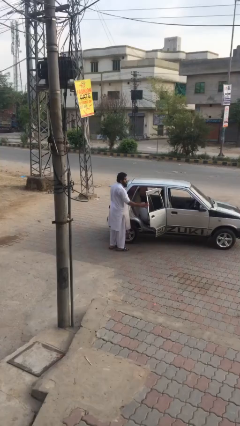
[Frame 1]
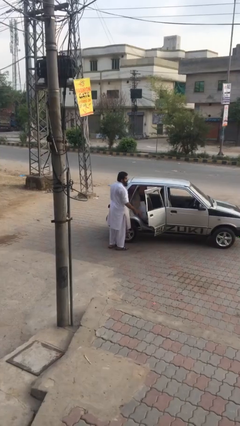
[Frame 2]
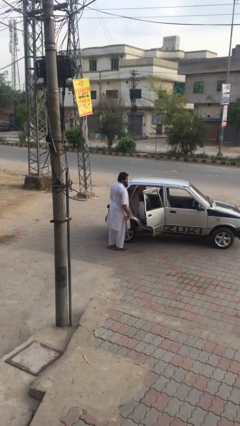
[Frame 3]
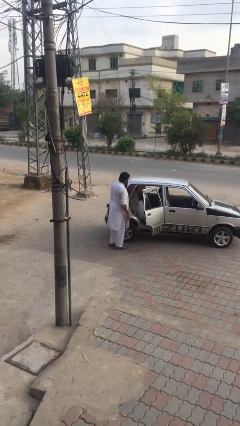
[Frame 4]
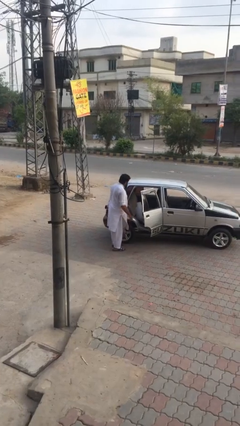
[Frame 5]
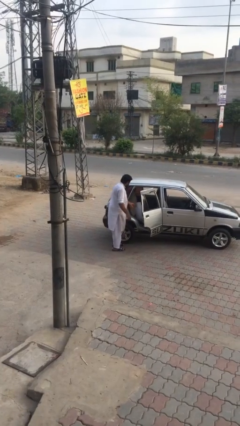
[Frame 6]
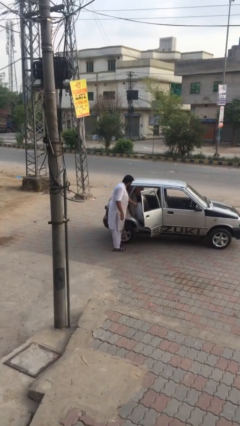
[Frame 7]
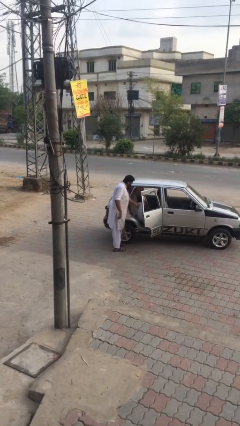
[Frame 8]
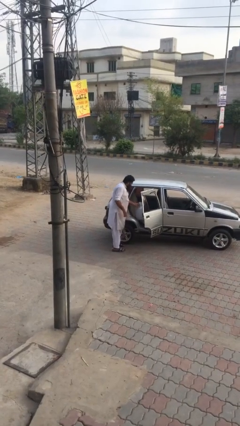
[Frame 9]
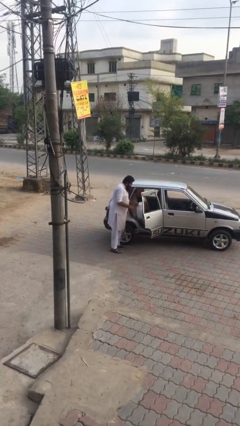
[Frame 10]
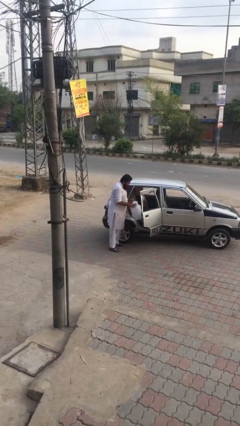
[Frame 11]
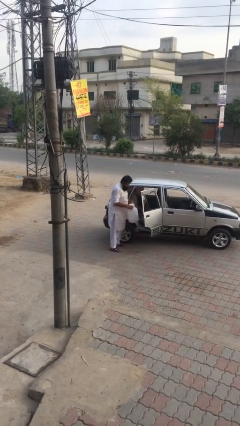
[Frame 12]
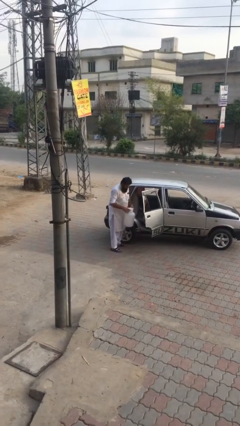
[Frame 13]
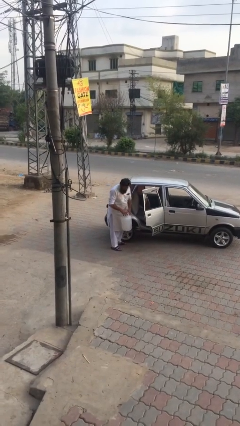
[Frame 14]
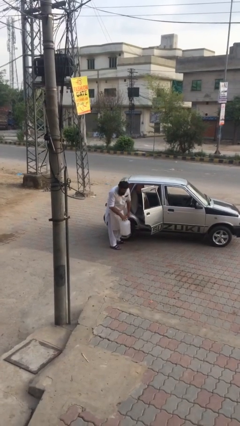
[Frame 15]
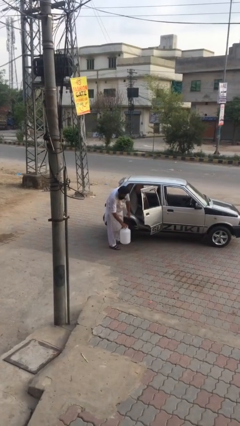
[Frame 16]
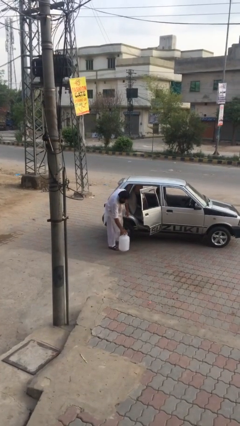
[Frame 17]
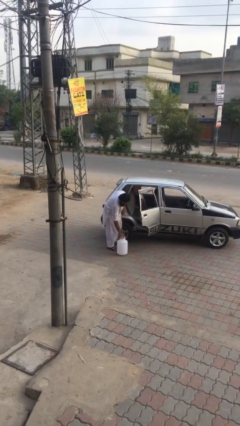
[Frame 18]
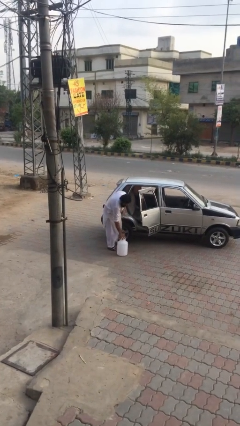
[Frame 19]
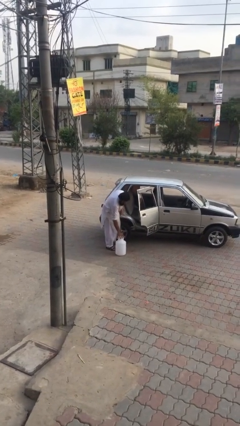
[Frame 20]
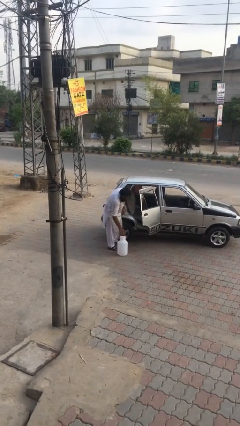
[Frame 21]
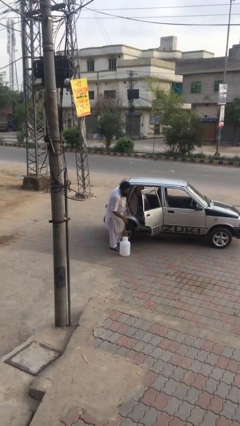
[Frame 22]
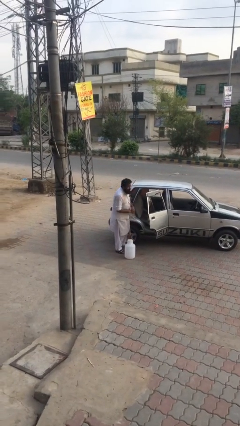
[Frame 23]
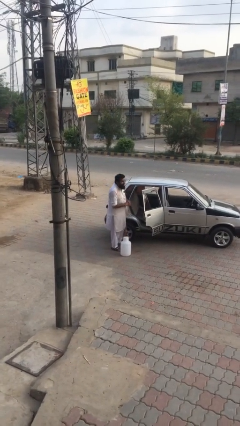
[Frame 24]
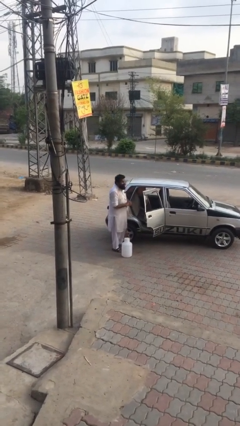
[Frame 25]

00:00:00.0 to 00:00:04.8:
person unloads car

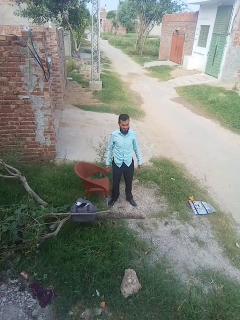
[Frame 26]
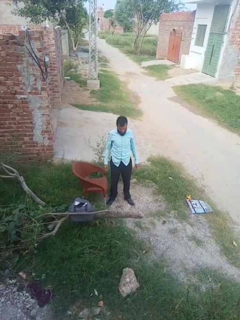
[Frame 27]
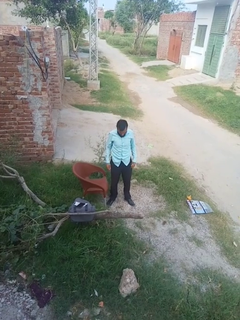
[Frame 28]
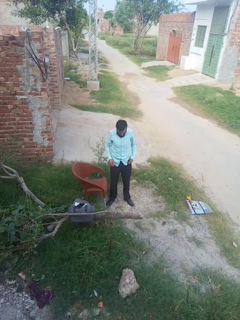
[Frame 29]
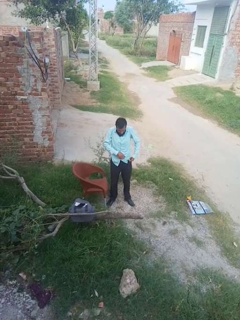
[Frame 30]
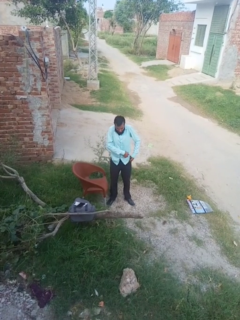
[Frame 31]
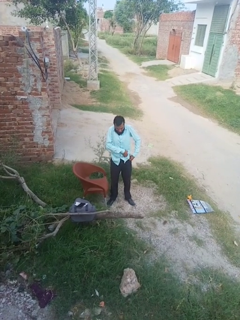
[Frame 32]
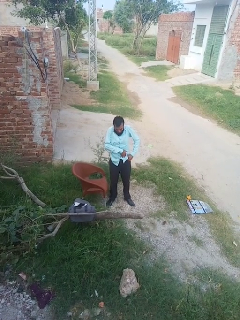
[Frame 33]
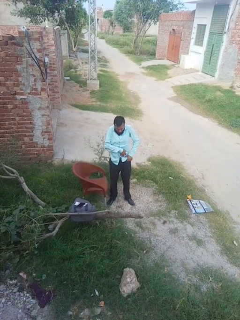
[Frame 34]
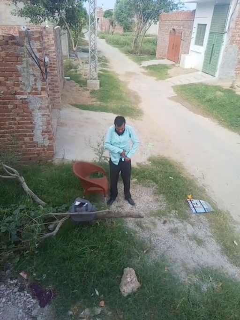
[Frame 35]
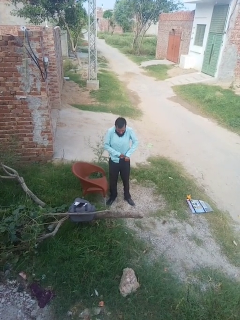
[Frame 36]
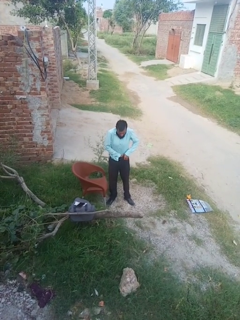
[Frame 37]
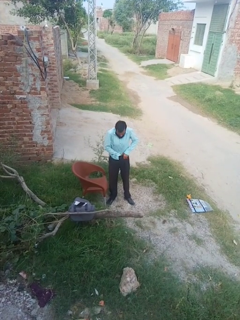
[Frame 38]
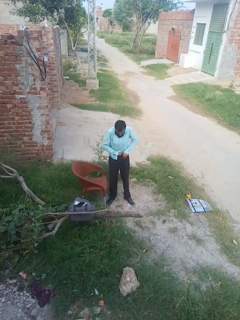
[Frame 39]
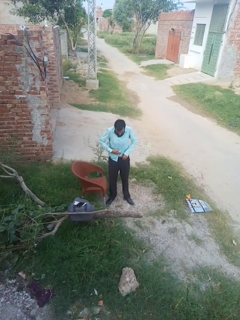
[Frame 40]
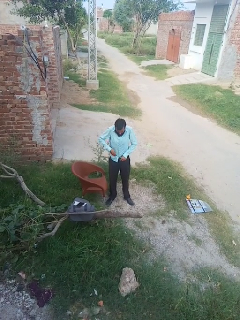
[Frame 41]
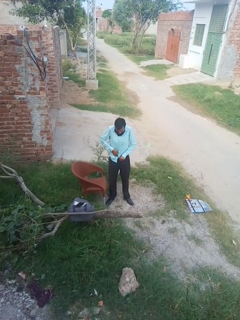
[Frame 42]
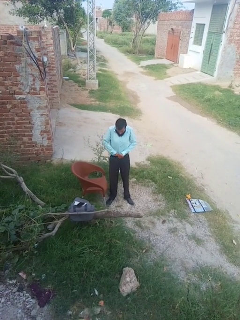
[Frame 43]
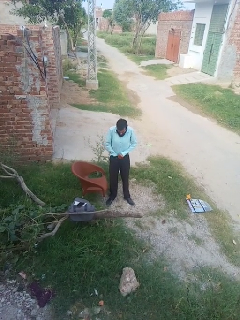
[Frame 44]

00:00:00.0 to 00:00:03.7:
person tucks in shirt

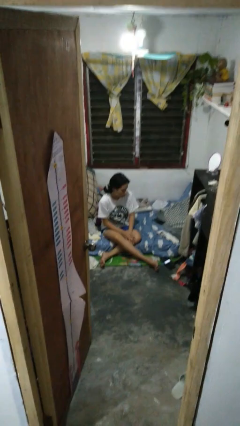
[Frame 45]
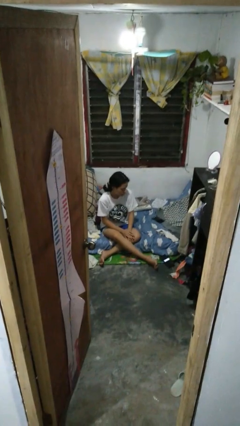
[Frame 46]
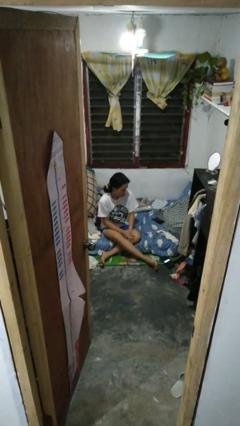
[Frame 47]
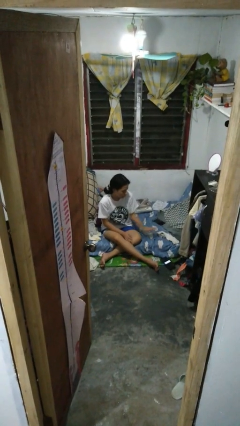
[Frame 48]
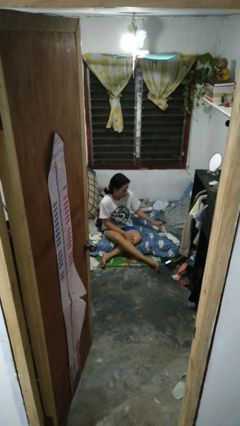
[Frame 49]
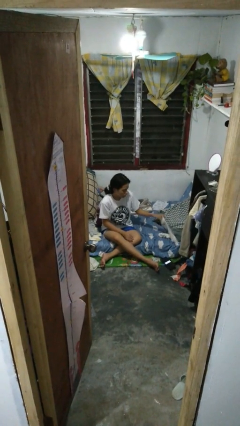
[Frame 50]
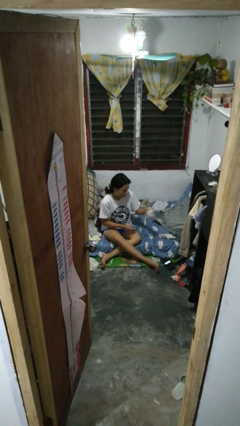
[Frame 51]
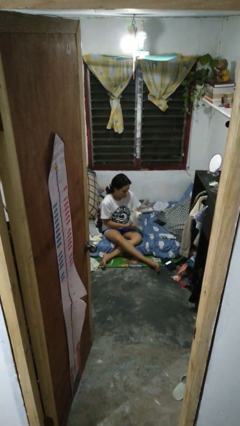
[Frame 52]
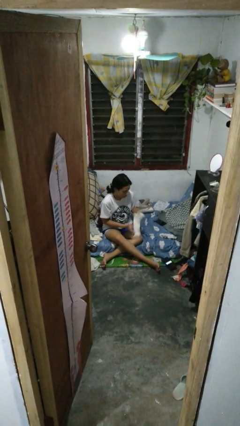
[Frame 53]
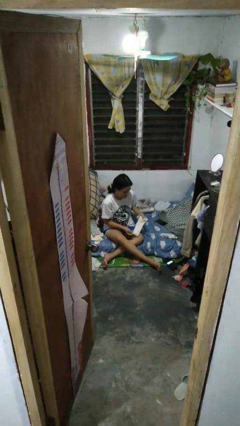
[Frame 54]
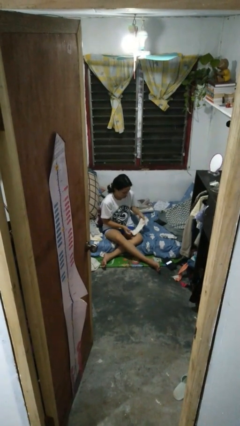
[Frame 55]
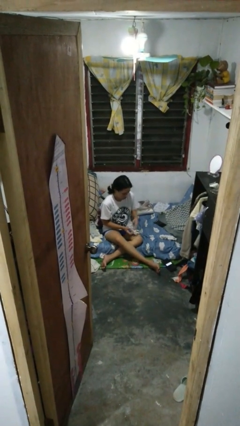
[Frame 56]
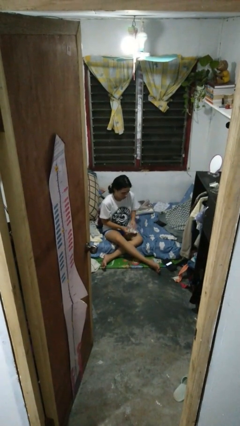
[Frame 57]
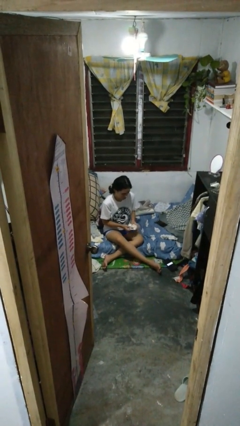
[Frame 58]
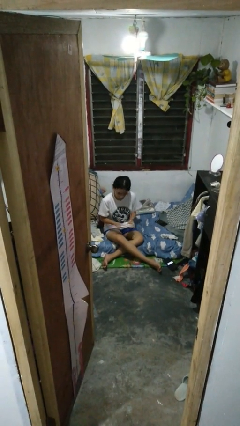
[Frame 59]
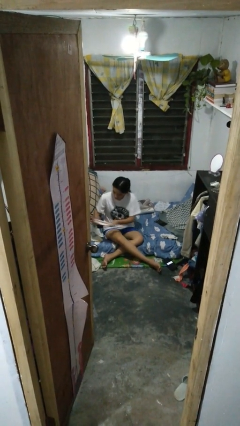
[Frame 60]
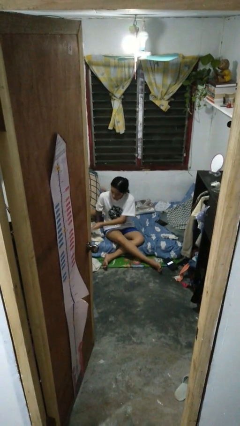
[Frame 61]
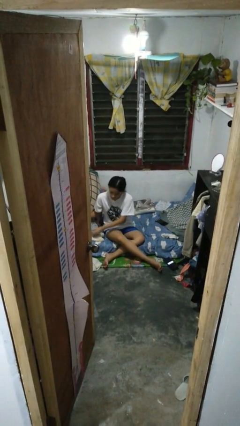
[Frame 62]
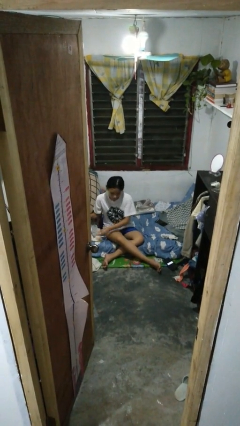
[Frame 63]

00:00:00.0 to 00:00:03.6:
person folds socks

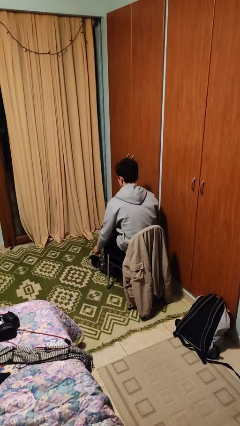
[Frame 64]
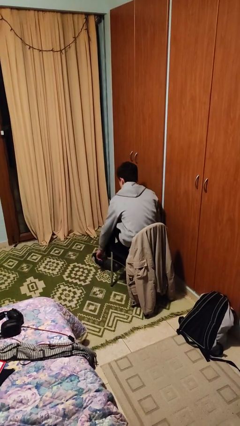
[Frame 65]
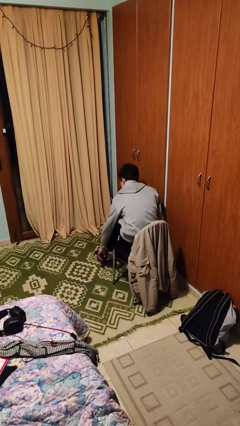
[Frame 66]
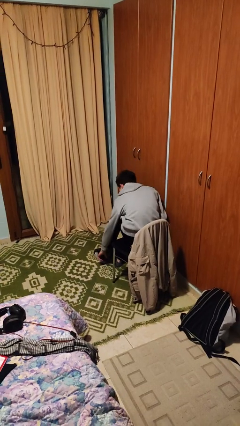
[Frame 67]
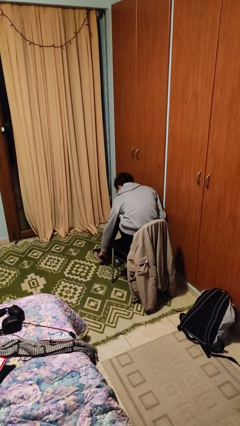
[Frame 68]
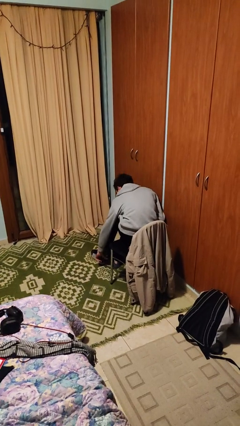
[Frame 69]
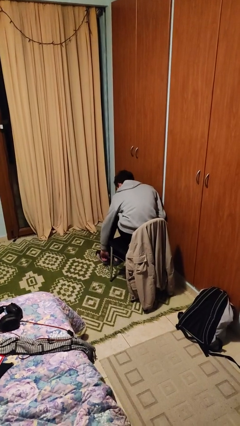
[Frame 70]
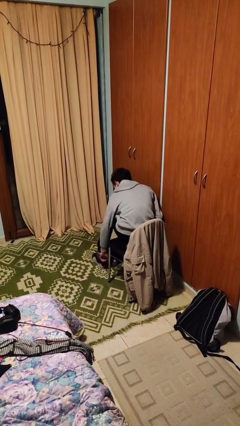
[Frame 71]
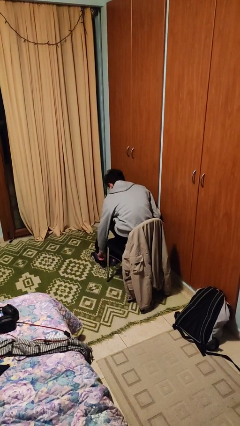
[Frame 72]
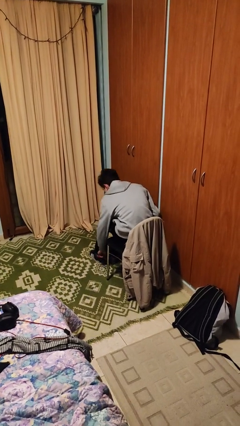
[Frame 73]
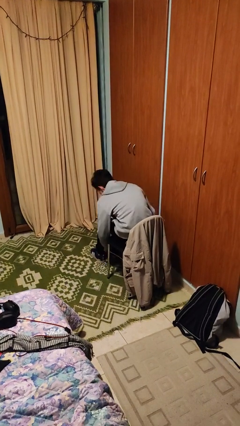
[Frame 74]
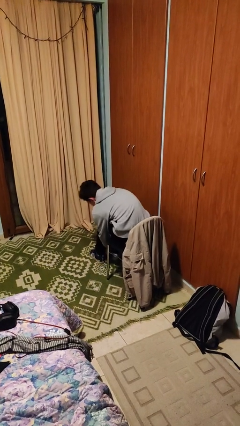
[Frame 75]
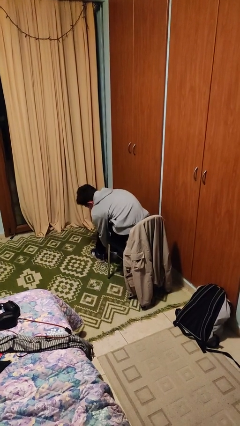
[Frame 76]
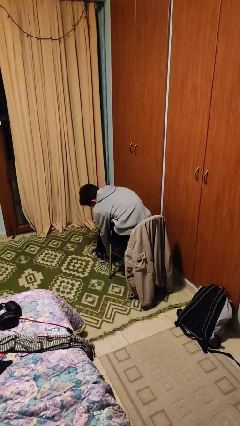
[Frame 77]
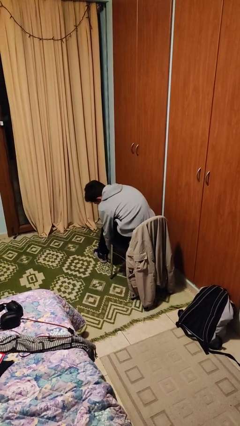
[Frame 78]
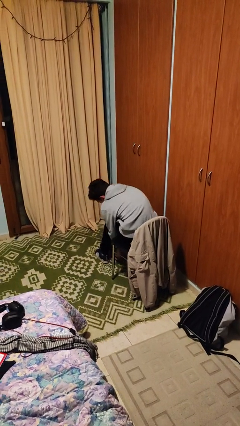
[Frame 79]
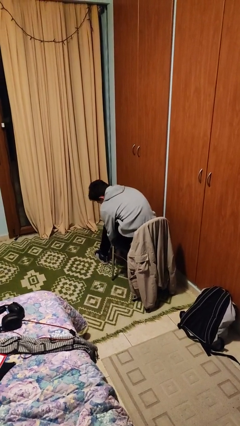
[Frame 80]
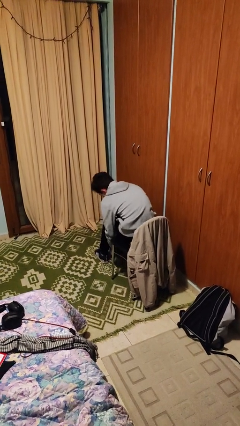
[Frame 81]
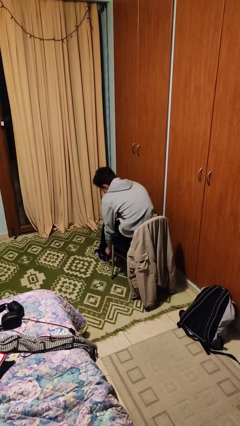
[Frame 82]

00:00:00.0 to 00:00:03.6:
person puts on shoes

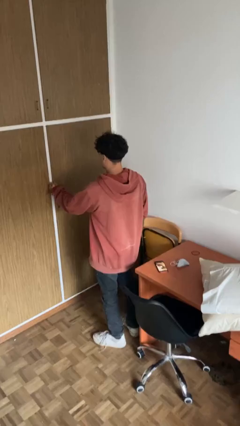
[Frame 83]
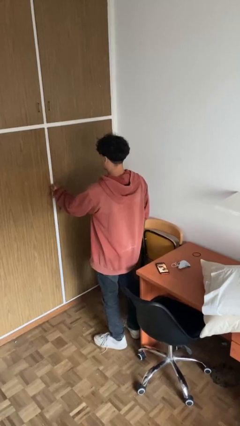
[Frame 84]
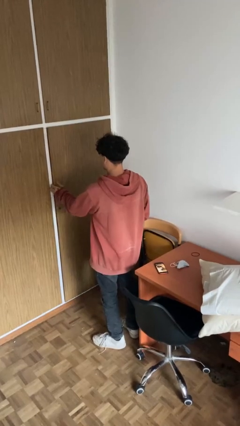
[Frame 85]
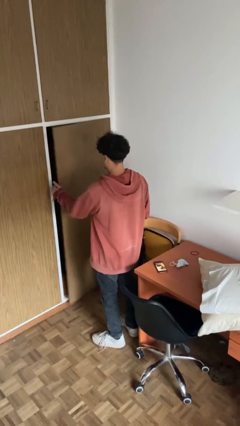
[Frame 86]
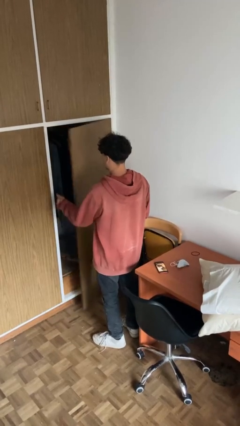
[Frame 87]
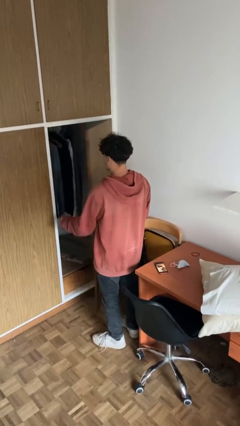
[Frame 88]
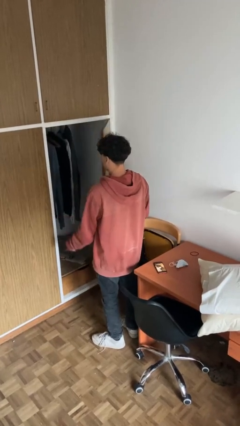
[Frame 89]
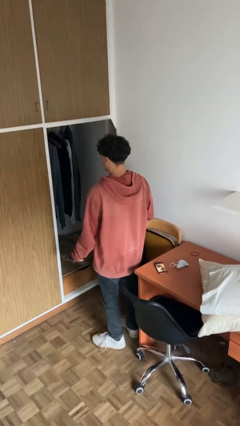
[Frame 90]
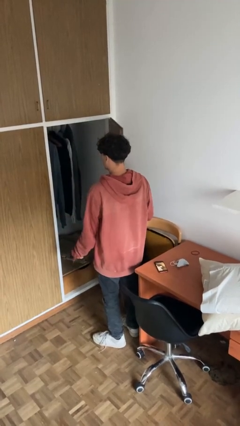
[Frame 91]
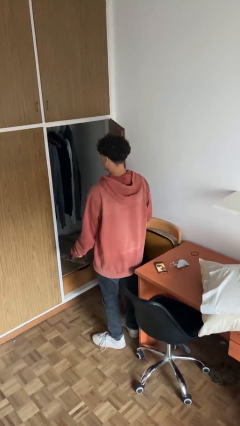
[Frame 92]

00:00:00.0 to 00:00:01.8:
person opens closet door

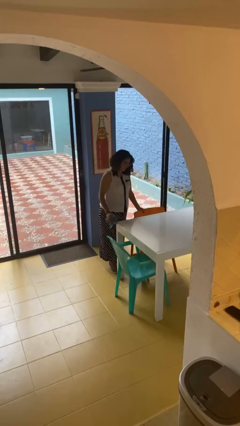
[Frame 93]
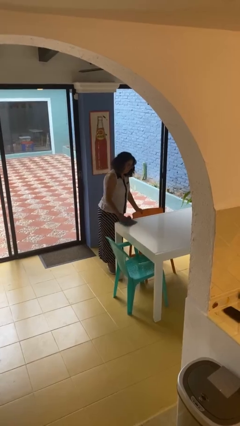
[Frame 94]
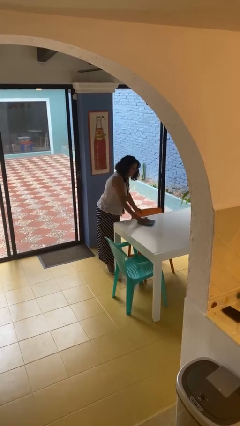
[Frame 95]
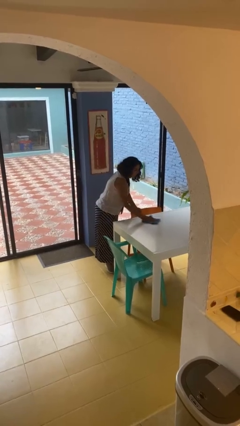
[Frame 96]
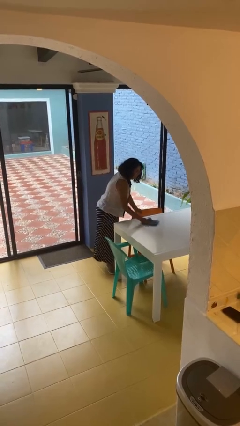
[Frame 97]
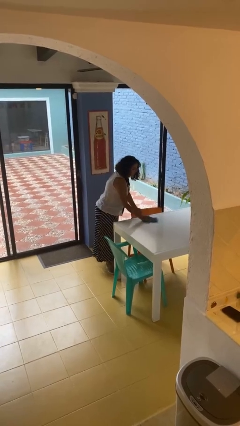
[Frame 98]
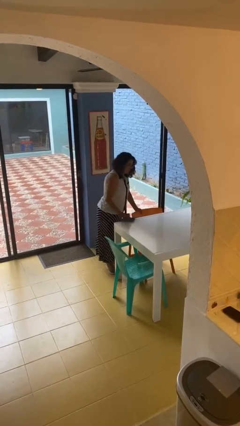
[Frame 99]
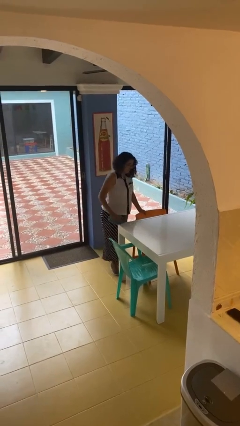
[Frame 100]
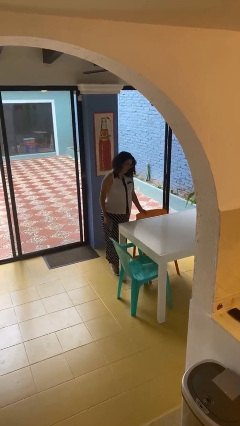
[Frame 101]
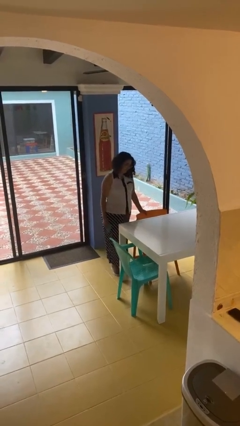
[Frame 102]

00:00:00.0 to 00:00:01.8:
person cleans table with rag
